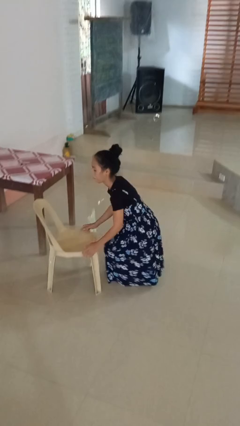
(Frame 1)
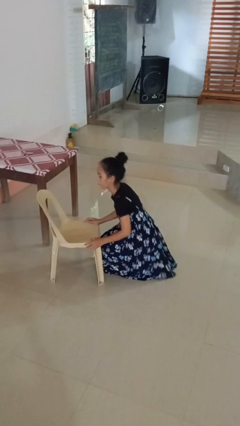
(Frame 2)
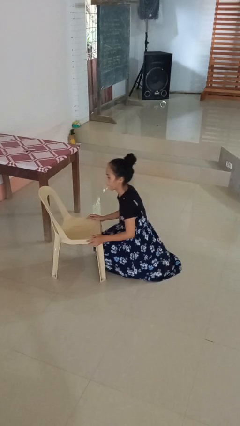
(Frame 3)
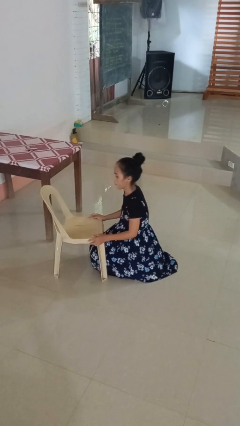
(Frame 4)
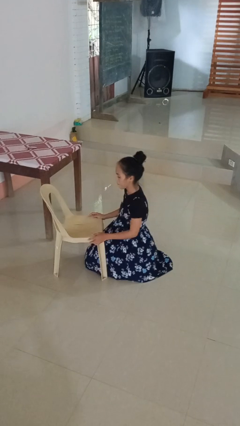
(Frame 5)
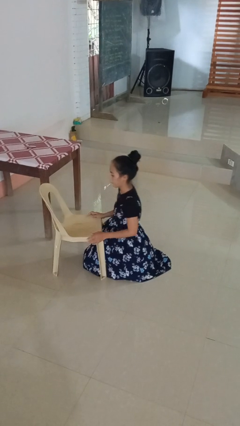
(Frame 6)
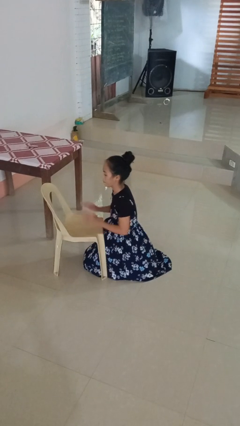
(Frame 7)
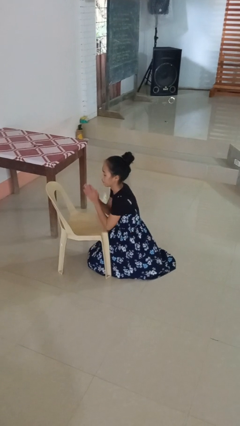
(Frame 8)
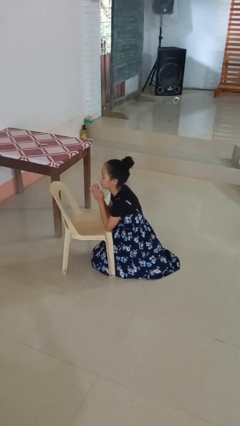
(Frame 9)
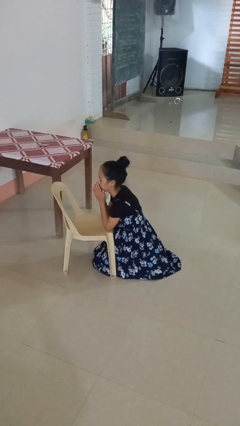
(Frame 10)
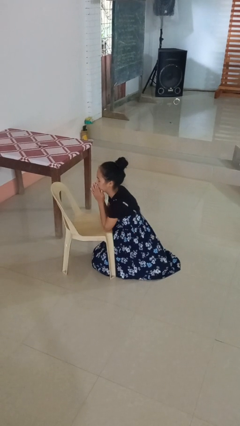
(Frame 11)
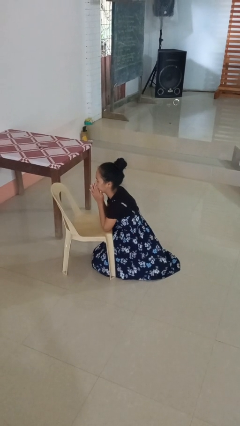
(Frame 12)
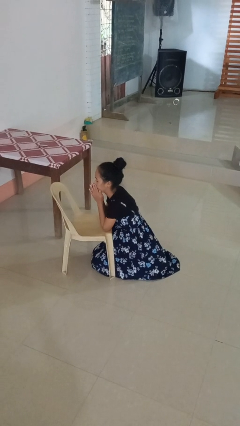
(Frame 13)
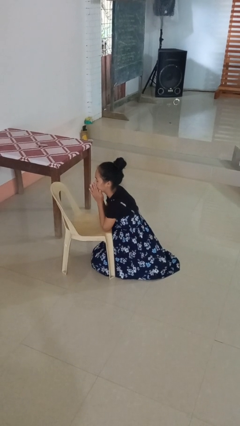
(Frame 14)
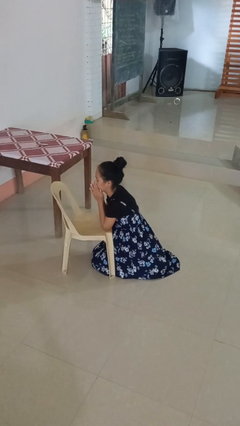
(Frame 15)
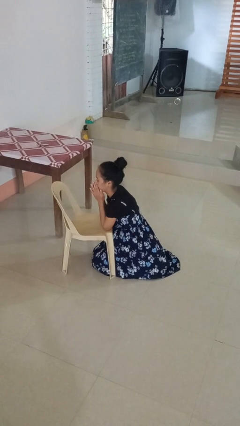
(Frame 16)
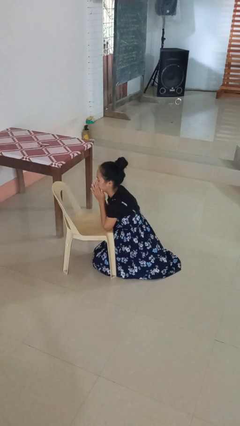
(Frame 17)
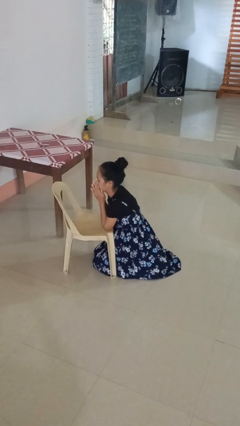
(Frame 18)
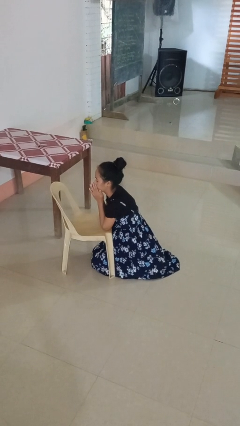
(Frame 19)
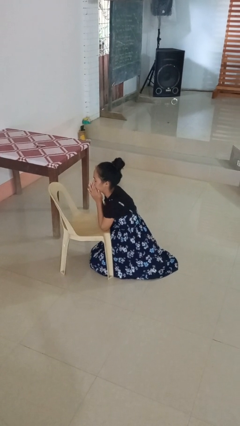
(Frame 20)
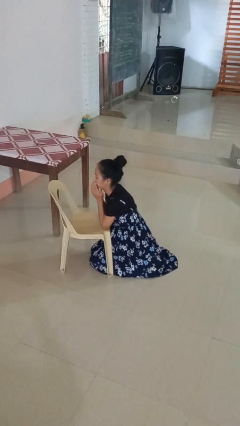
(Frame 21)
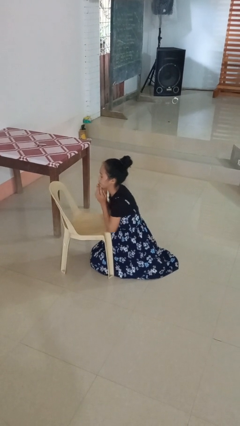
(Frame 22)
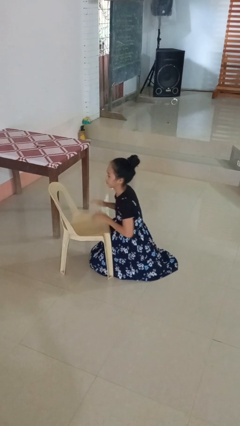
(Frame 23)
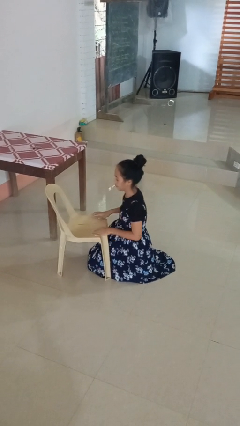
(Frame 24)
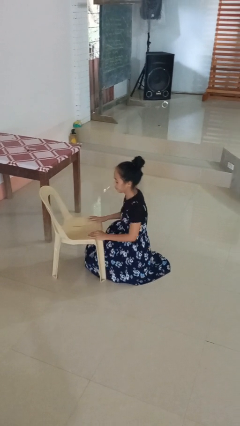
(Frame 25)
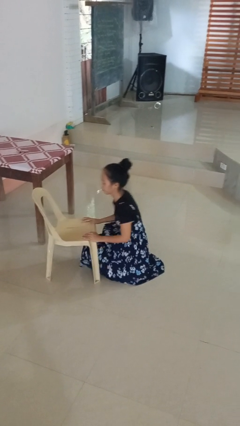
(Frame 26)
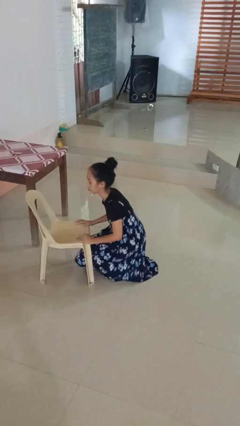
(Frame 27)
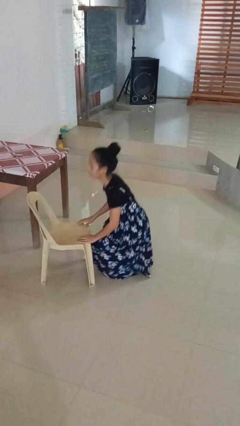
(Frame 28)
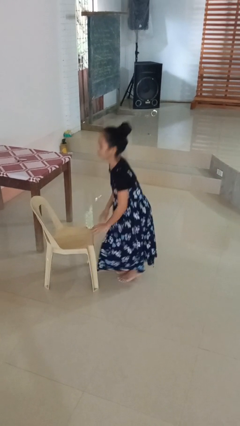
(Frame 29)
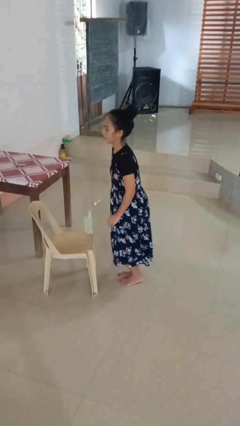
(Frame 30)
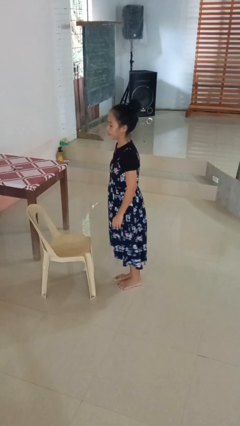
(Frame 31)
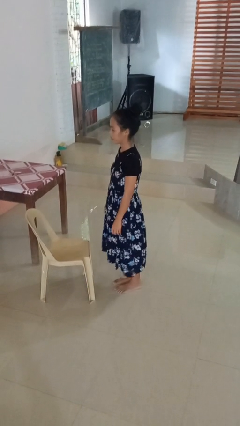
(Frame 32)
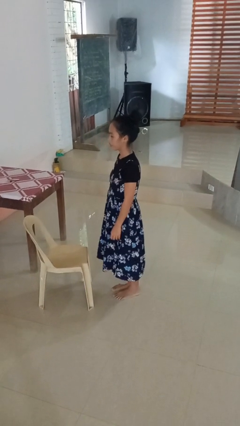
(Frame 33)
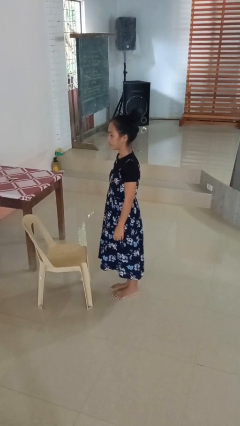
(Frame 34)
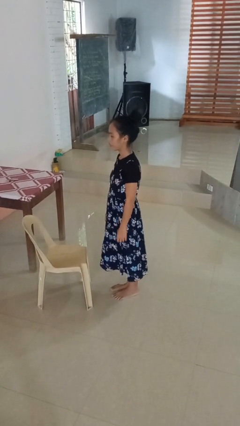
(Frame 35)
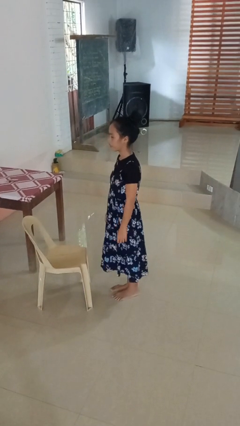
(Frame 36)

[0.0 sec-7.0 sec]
person prays

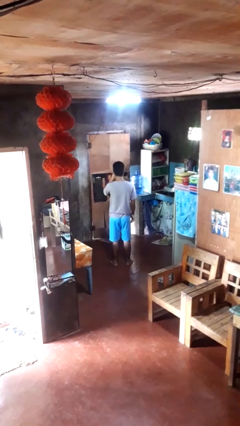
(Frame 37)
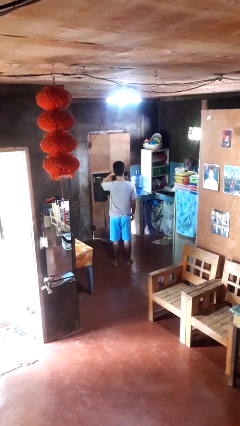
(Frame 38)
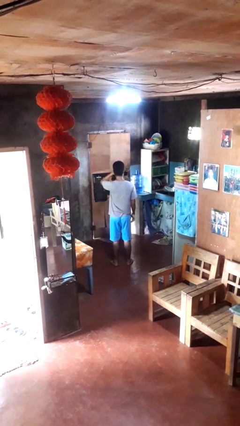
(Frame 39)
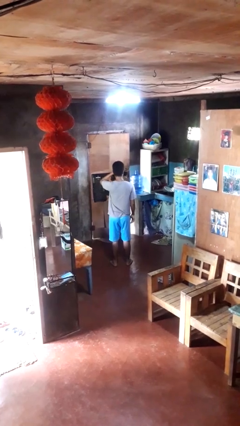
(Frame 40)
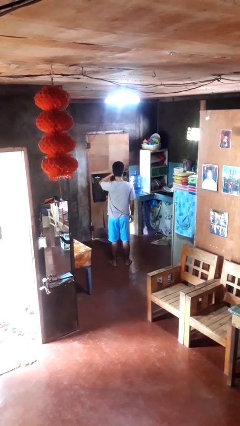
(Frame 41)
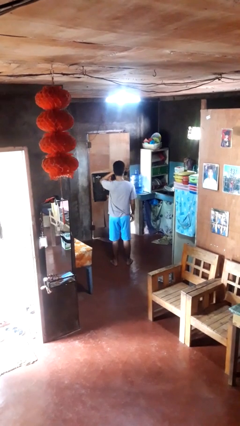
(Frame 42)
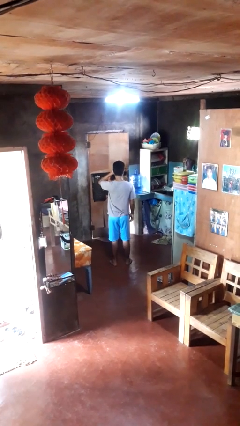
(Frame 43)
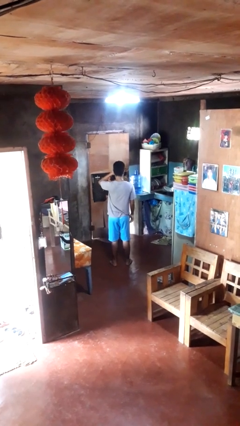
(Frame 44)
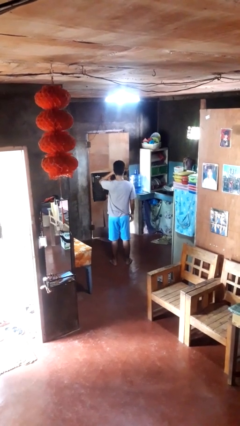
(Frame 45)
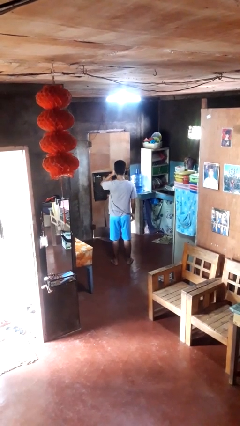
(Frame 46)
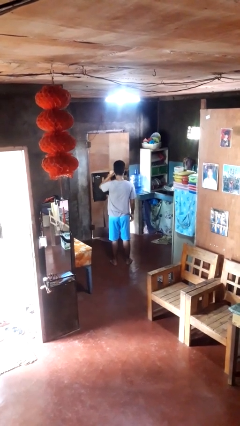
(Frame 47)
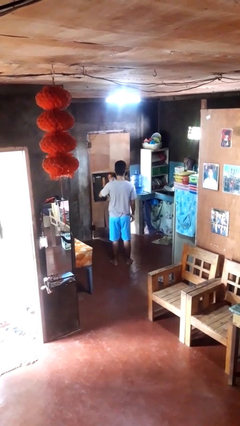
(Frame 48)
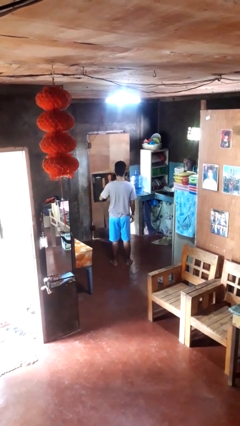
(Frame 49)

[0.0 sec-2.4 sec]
person rubs eyes

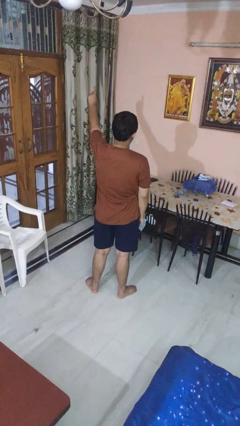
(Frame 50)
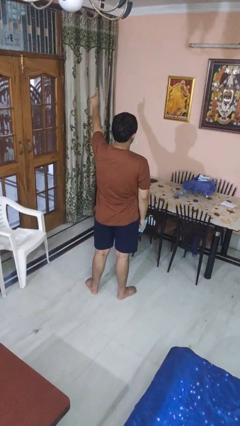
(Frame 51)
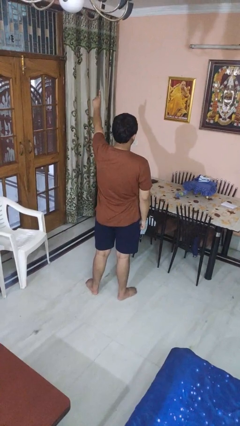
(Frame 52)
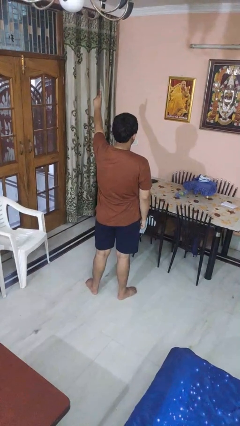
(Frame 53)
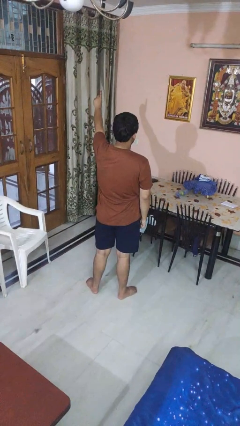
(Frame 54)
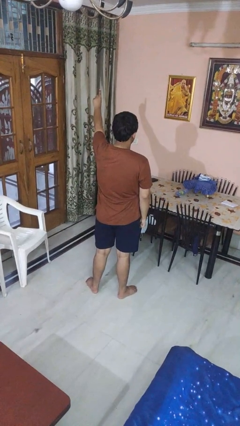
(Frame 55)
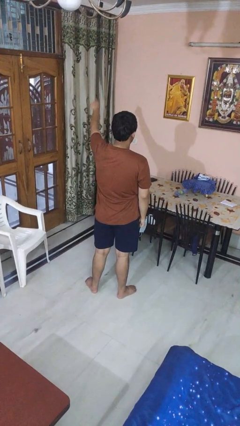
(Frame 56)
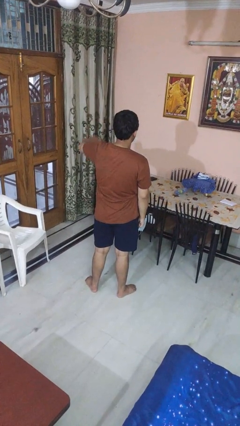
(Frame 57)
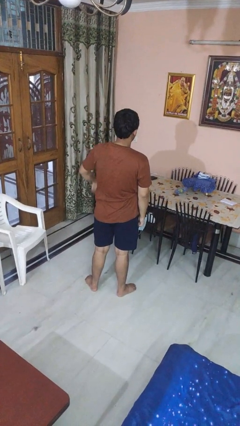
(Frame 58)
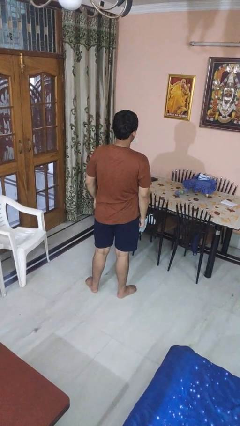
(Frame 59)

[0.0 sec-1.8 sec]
person gestures number one

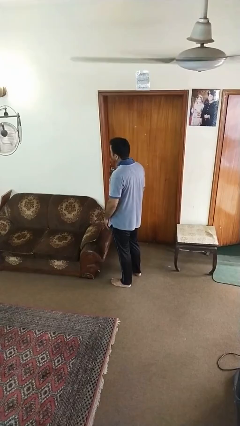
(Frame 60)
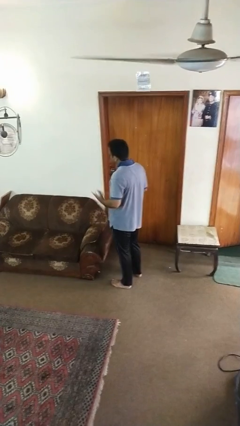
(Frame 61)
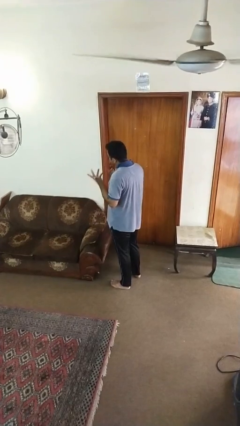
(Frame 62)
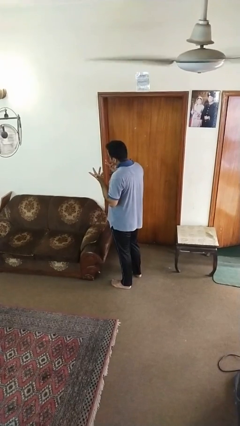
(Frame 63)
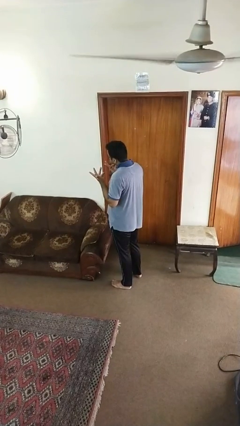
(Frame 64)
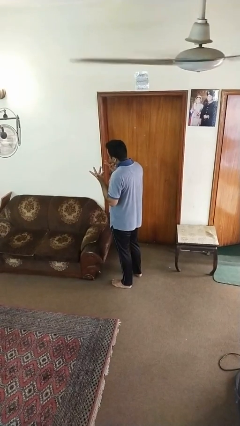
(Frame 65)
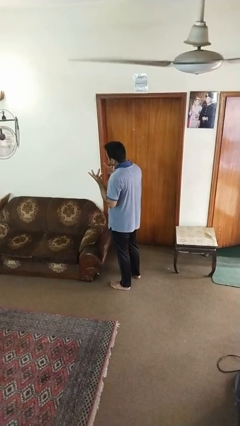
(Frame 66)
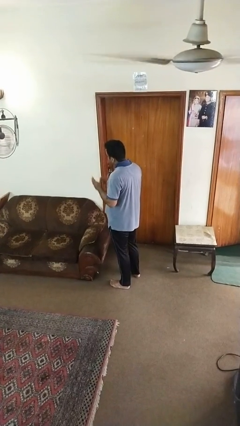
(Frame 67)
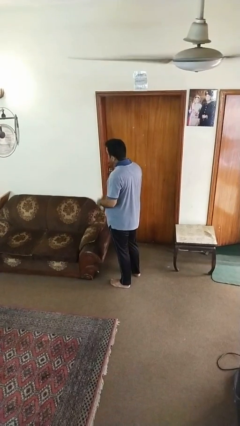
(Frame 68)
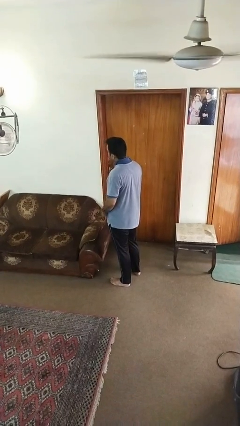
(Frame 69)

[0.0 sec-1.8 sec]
person shrugs

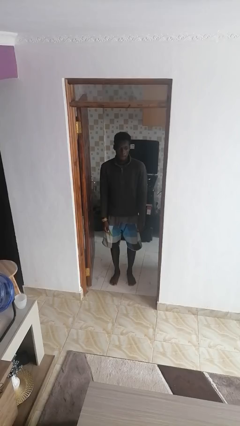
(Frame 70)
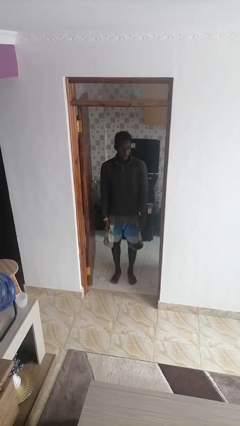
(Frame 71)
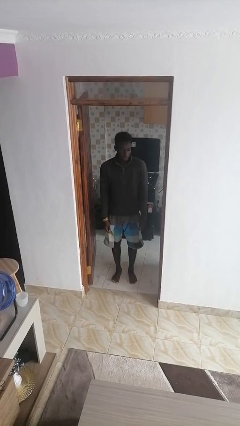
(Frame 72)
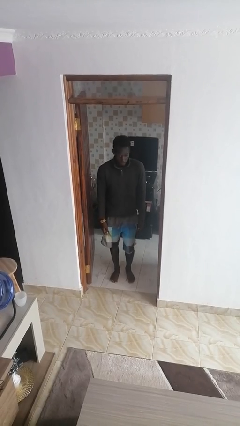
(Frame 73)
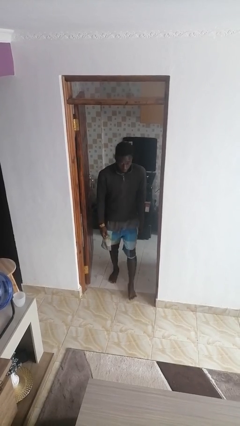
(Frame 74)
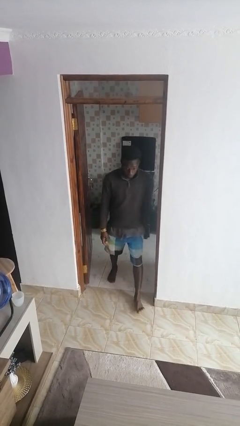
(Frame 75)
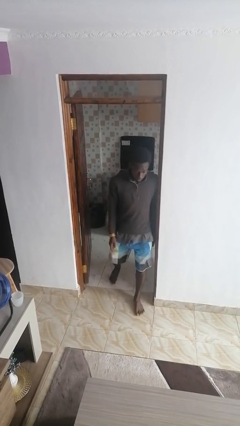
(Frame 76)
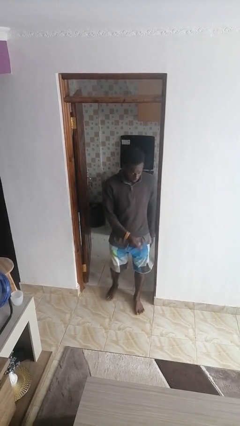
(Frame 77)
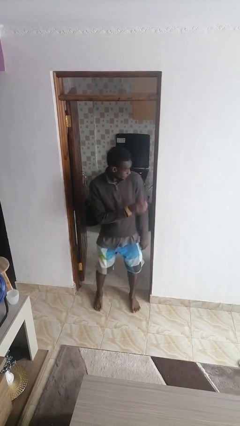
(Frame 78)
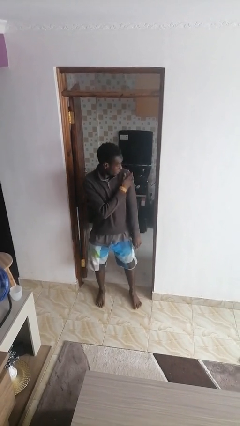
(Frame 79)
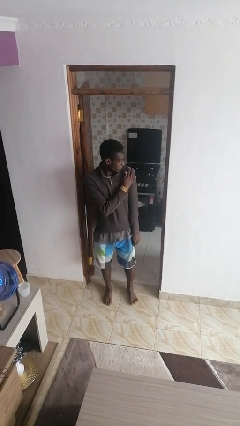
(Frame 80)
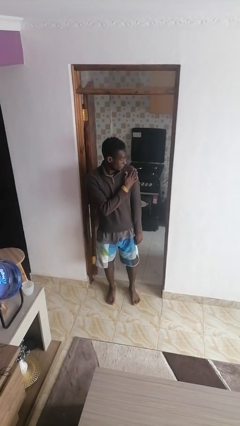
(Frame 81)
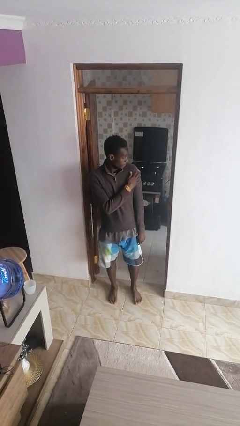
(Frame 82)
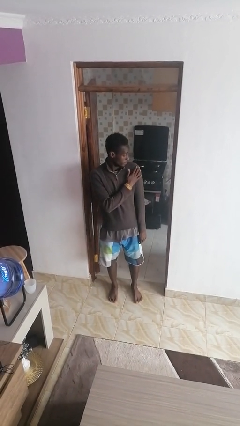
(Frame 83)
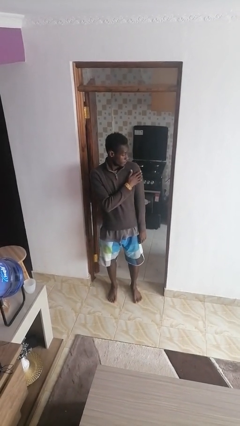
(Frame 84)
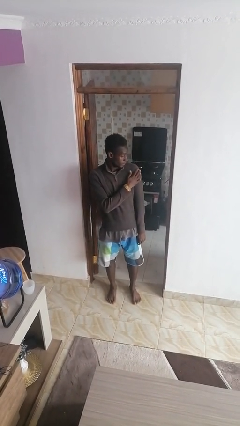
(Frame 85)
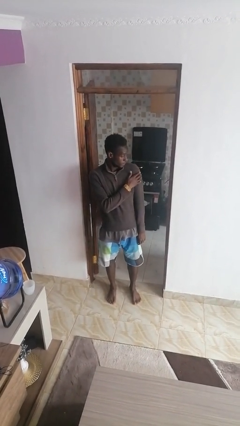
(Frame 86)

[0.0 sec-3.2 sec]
person bumps into wall

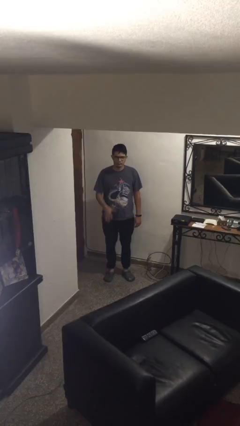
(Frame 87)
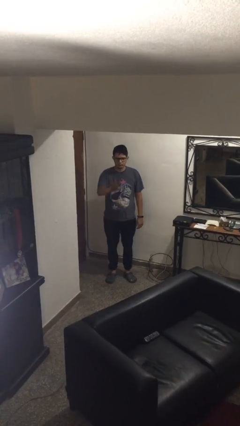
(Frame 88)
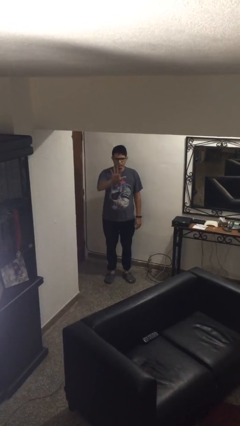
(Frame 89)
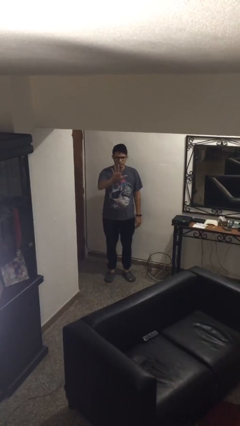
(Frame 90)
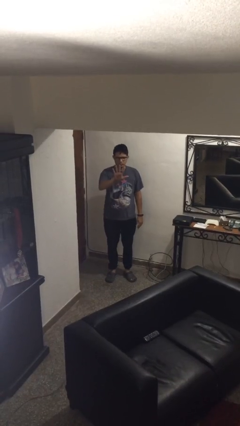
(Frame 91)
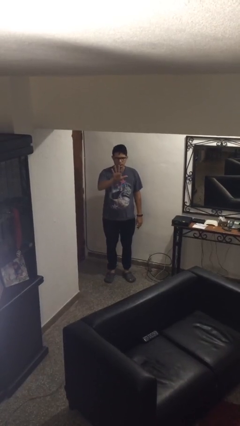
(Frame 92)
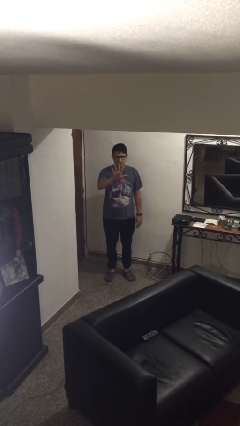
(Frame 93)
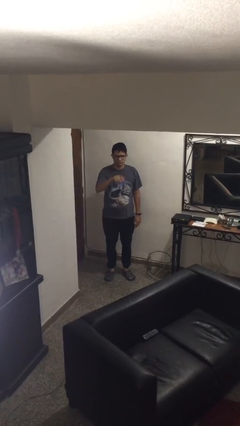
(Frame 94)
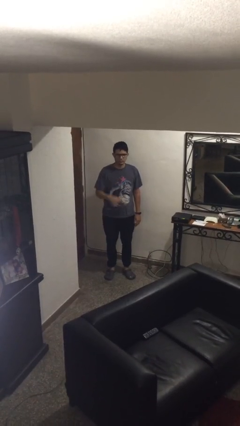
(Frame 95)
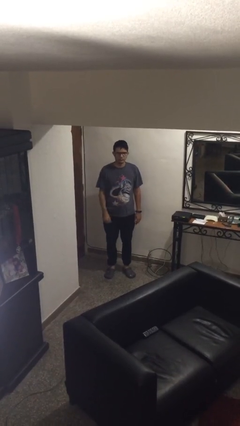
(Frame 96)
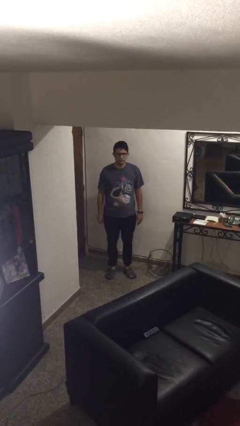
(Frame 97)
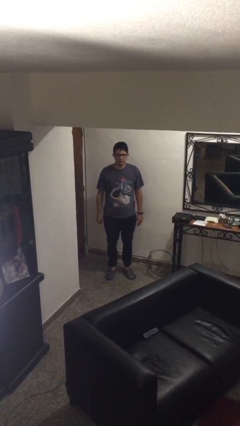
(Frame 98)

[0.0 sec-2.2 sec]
person gestures number five
